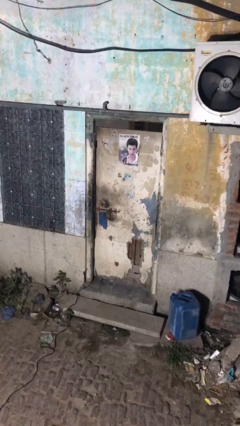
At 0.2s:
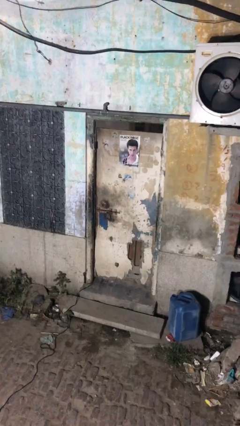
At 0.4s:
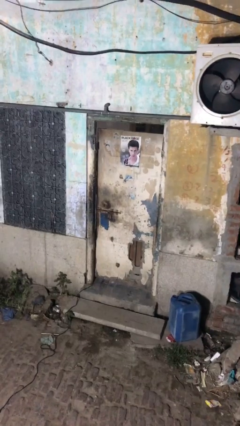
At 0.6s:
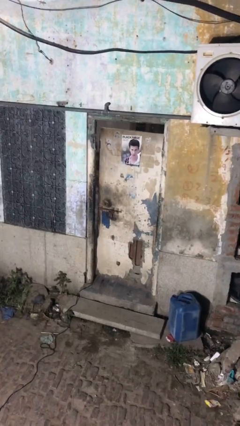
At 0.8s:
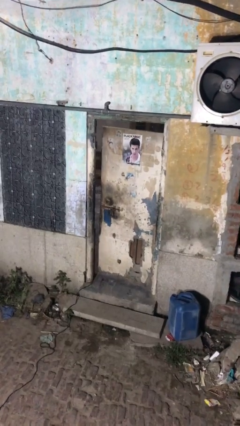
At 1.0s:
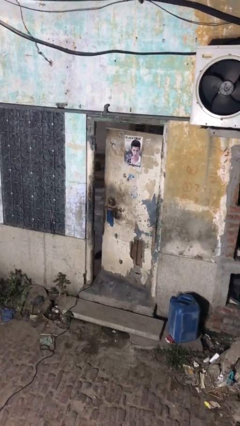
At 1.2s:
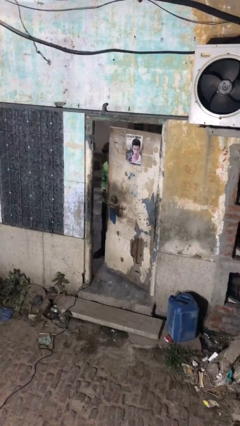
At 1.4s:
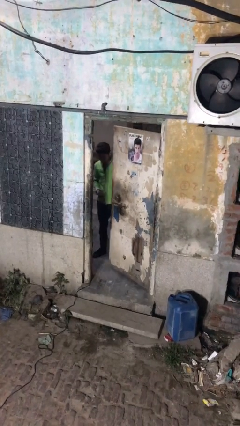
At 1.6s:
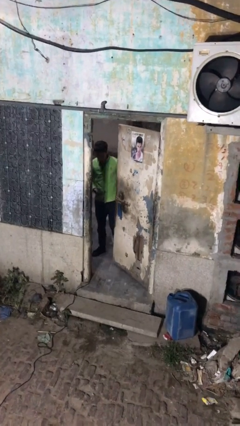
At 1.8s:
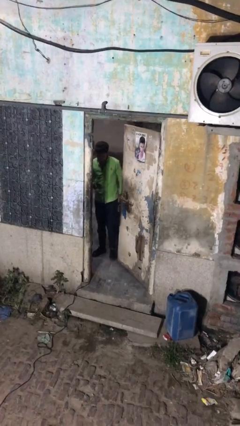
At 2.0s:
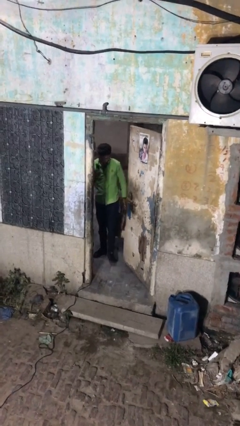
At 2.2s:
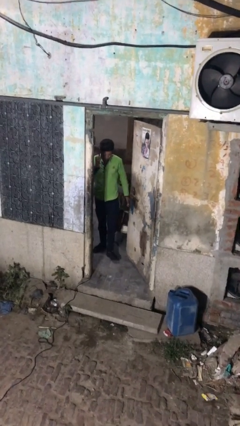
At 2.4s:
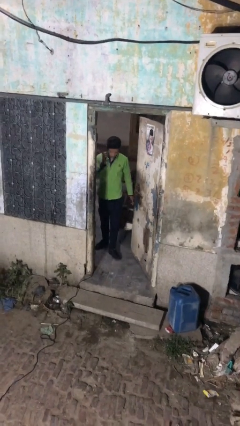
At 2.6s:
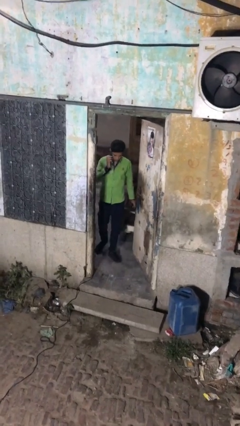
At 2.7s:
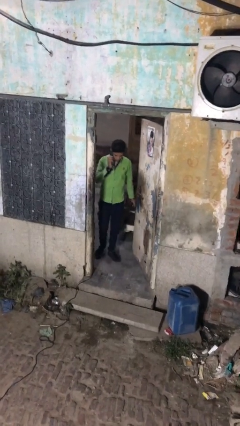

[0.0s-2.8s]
person opens facility door

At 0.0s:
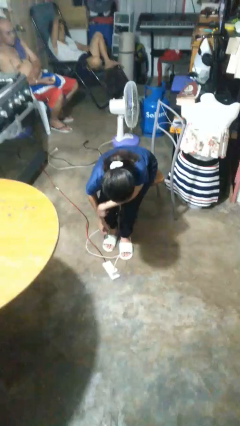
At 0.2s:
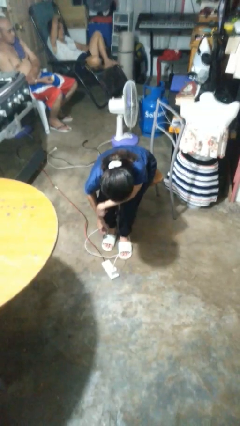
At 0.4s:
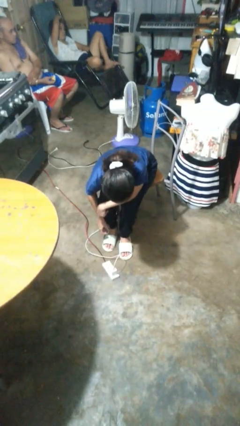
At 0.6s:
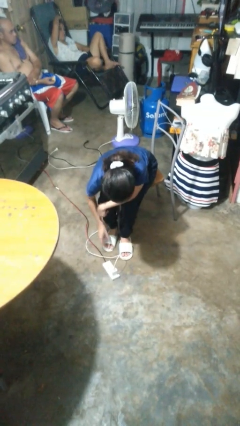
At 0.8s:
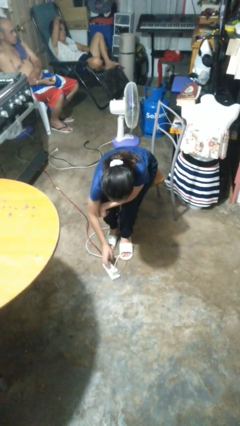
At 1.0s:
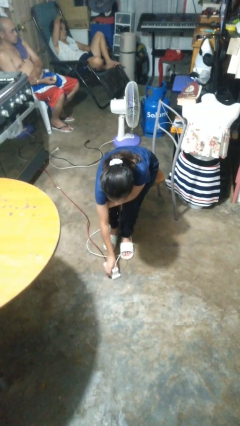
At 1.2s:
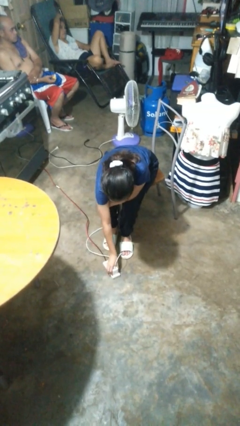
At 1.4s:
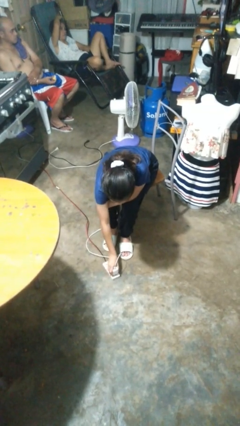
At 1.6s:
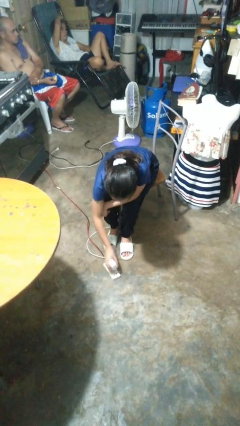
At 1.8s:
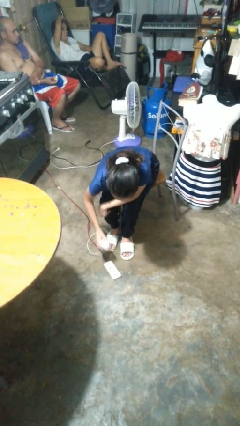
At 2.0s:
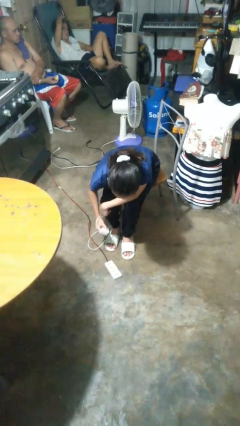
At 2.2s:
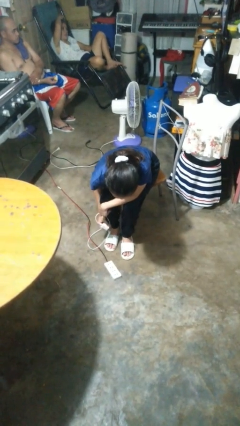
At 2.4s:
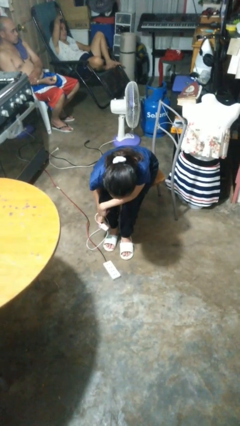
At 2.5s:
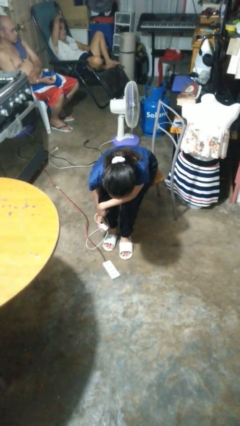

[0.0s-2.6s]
person unplugs from electrical socket

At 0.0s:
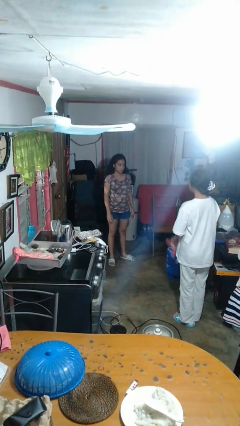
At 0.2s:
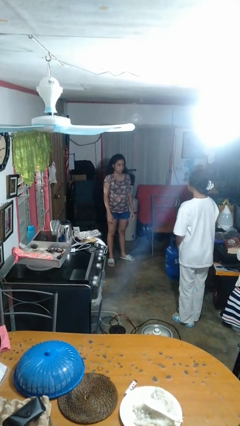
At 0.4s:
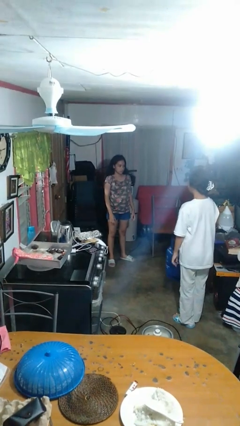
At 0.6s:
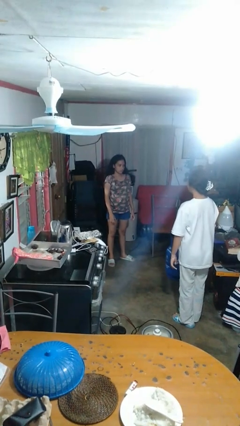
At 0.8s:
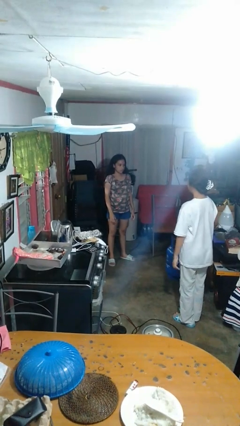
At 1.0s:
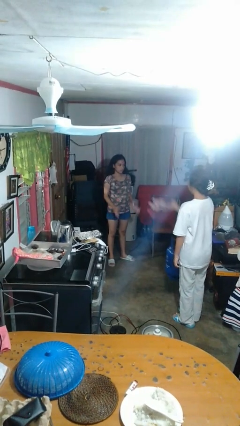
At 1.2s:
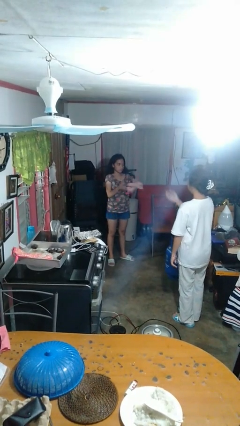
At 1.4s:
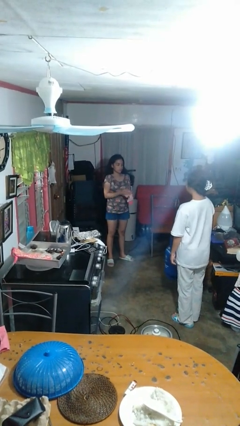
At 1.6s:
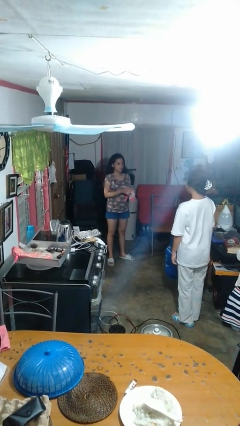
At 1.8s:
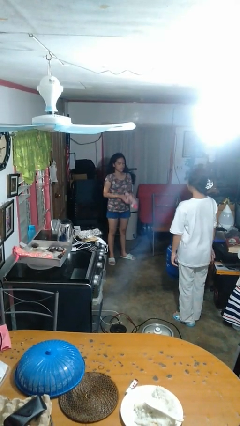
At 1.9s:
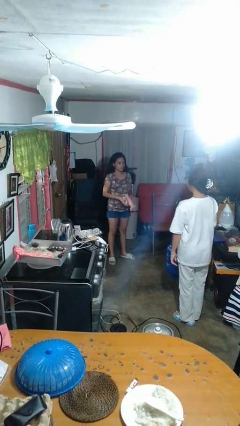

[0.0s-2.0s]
person catches object from person

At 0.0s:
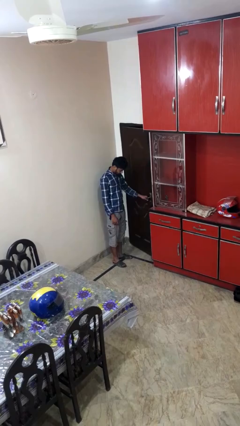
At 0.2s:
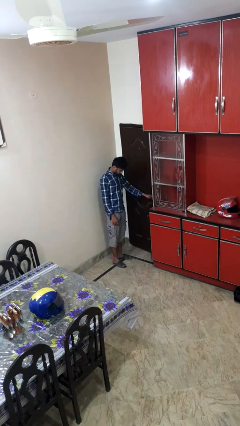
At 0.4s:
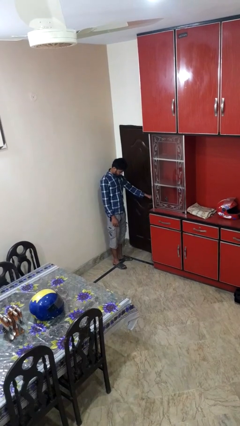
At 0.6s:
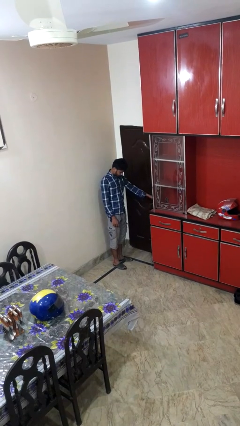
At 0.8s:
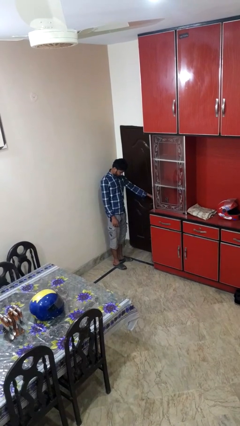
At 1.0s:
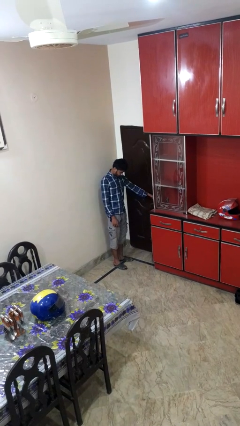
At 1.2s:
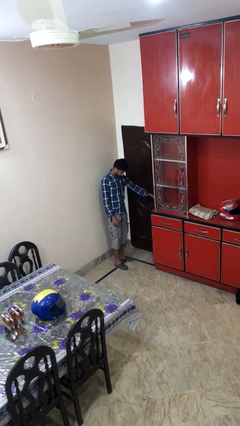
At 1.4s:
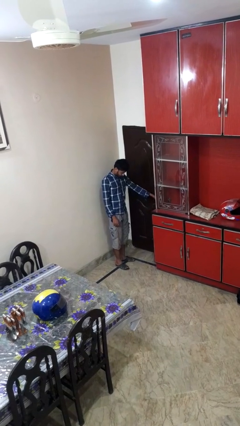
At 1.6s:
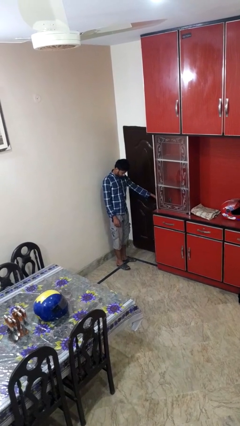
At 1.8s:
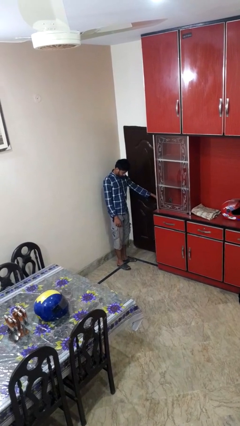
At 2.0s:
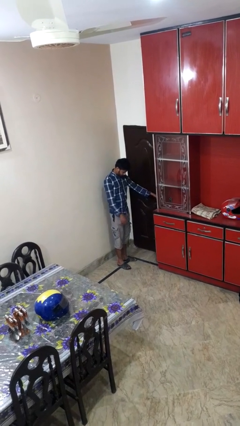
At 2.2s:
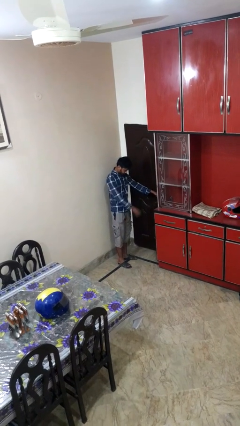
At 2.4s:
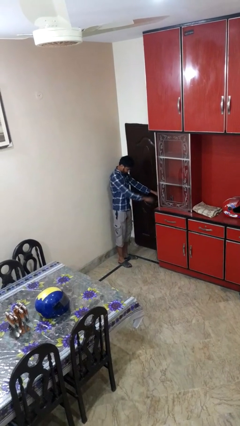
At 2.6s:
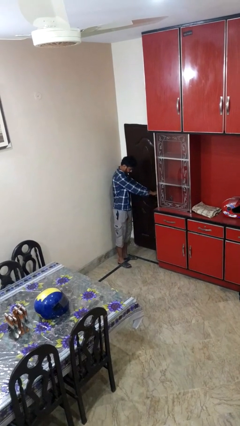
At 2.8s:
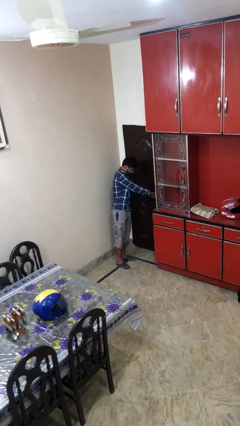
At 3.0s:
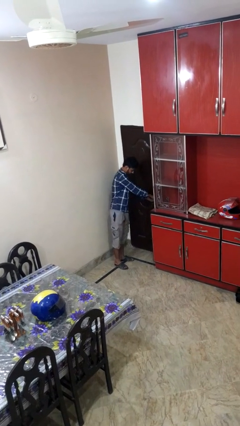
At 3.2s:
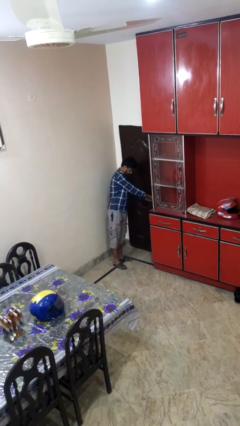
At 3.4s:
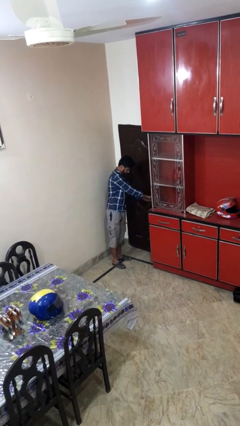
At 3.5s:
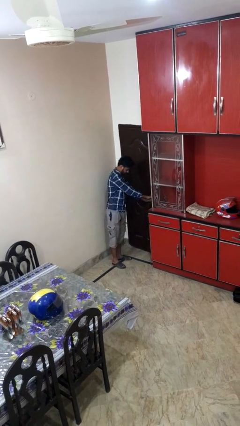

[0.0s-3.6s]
person closes facility door

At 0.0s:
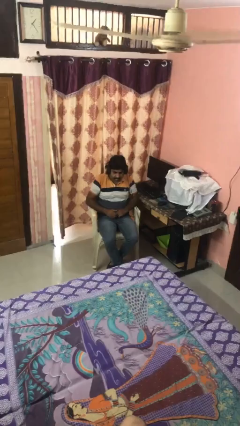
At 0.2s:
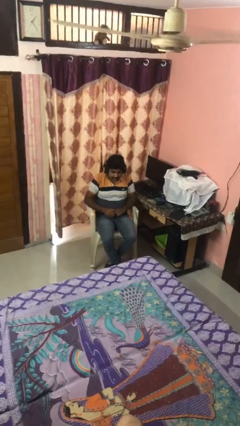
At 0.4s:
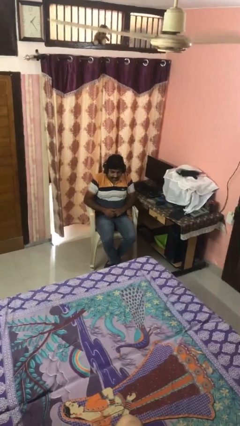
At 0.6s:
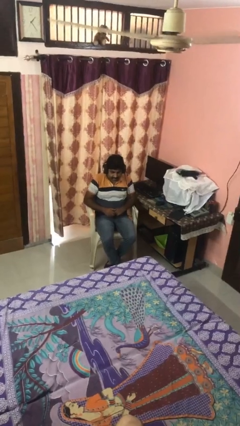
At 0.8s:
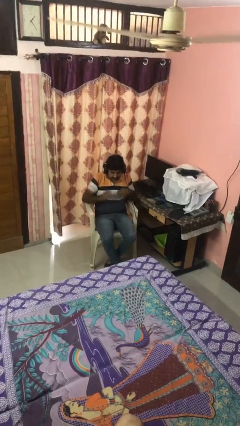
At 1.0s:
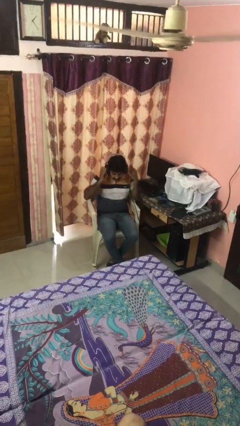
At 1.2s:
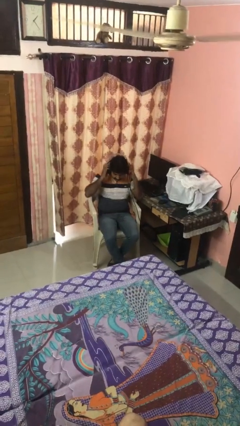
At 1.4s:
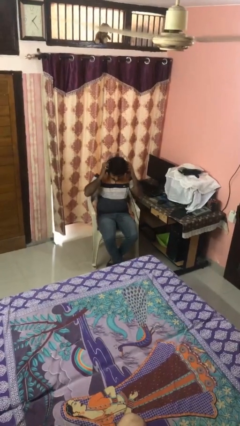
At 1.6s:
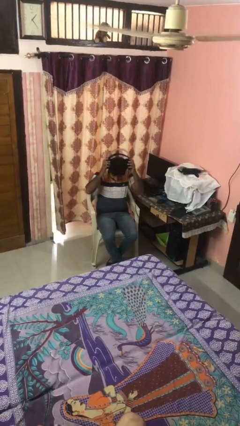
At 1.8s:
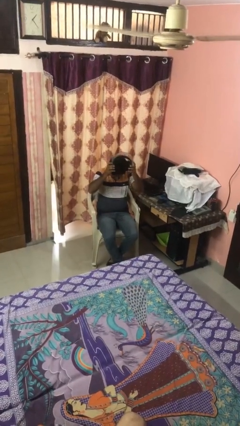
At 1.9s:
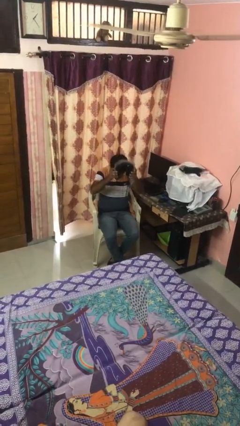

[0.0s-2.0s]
person takes off headphones

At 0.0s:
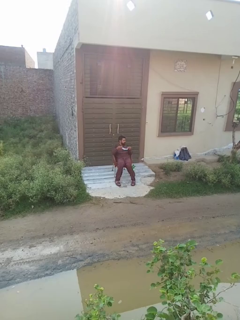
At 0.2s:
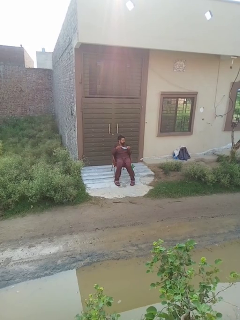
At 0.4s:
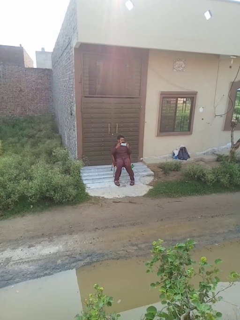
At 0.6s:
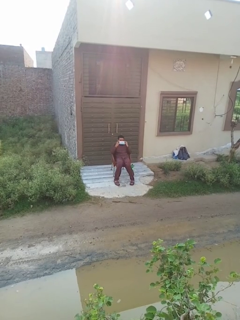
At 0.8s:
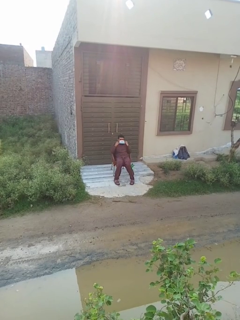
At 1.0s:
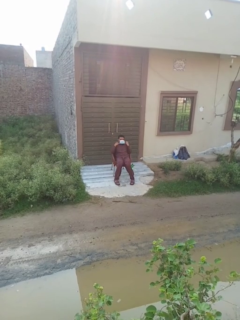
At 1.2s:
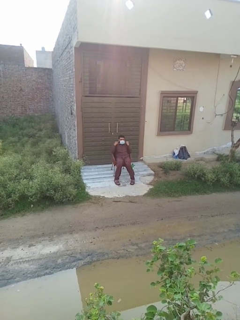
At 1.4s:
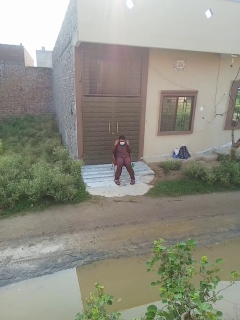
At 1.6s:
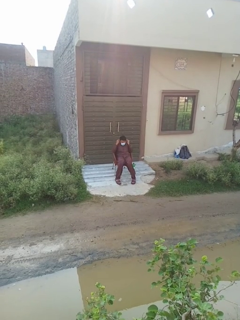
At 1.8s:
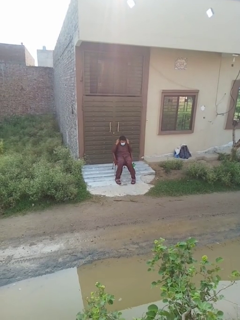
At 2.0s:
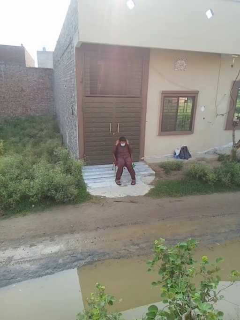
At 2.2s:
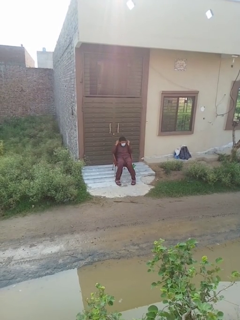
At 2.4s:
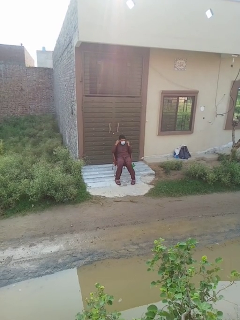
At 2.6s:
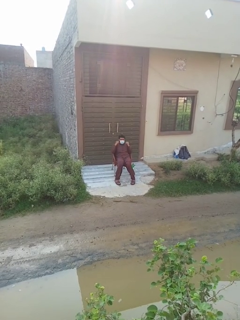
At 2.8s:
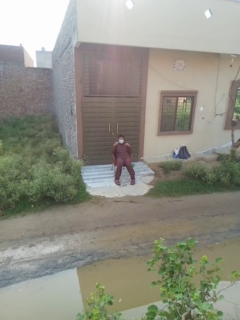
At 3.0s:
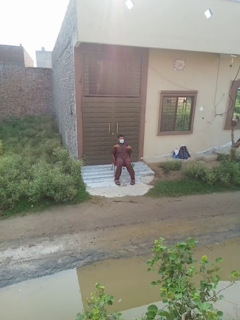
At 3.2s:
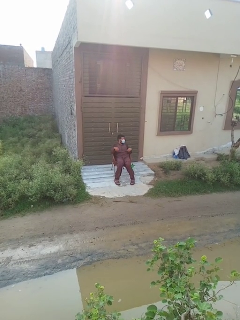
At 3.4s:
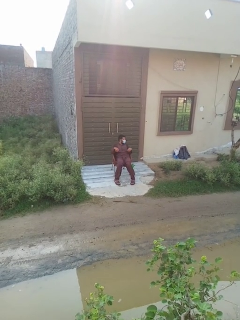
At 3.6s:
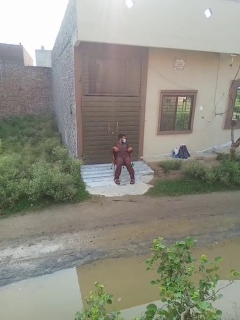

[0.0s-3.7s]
person puts on facemask

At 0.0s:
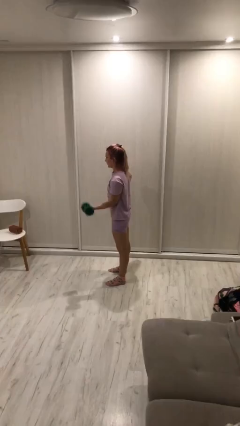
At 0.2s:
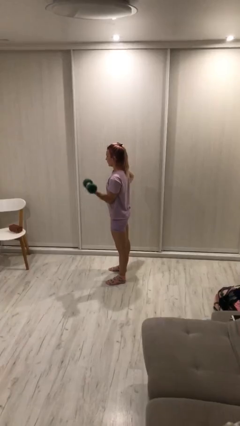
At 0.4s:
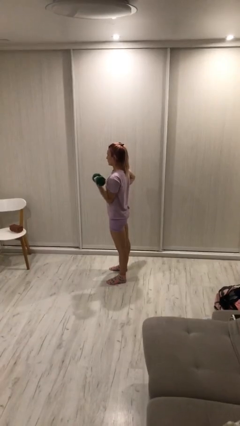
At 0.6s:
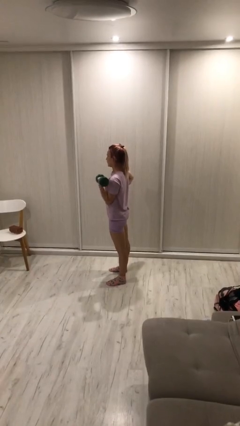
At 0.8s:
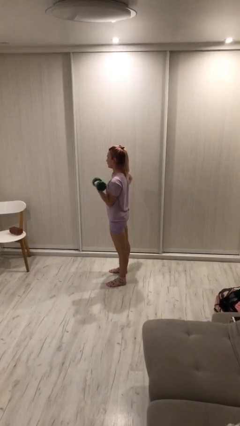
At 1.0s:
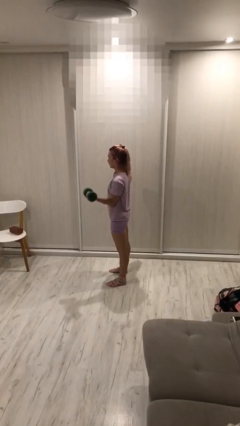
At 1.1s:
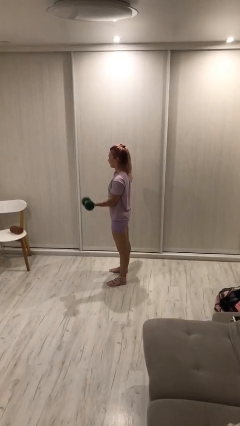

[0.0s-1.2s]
person lifts dumbbells
